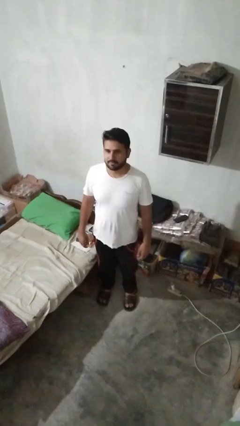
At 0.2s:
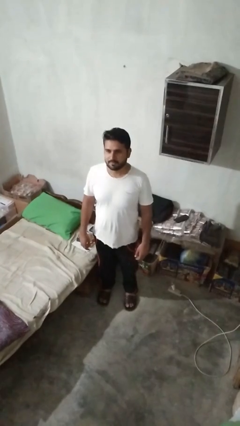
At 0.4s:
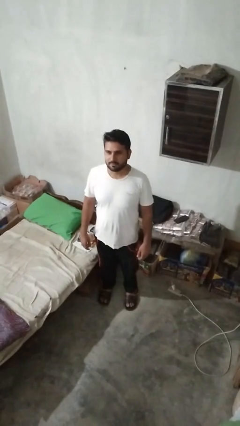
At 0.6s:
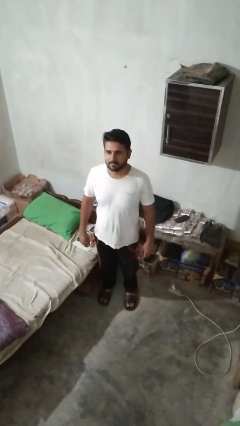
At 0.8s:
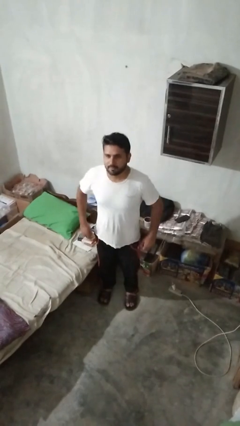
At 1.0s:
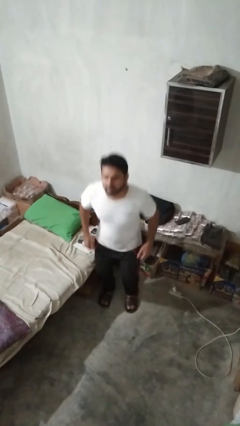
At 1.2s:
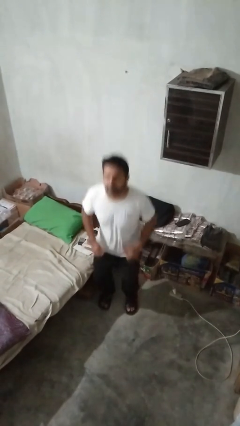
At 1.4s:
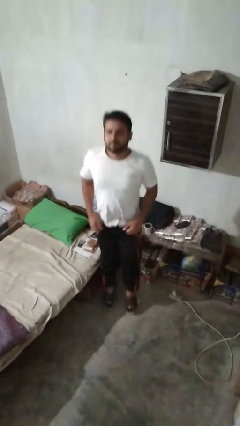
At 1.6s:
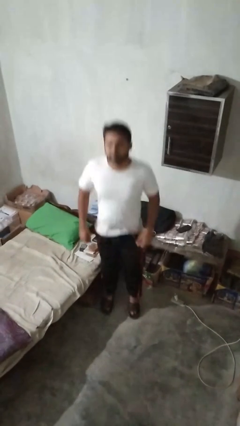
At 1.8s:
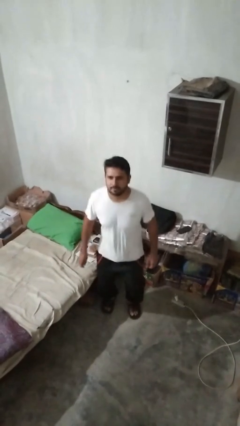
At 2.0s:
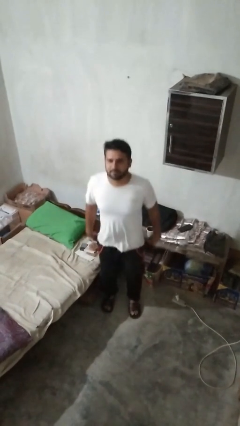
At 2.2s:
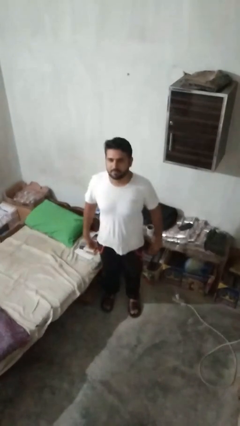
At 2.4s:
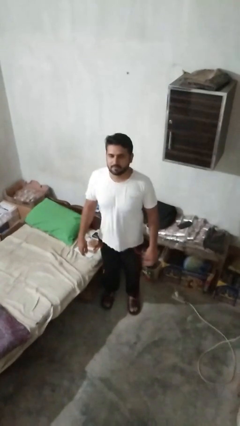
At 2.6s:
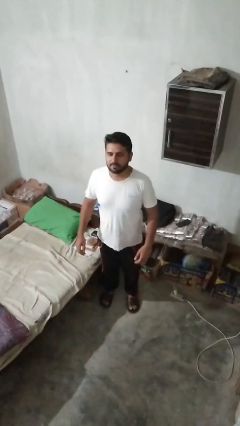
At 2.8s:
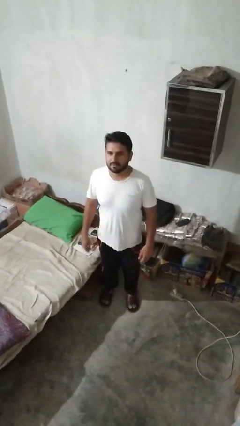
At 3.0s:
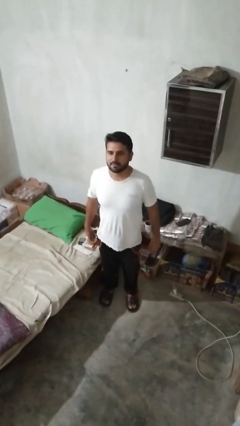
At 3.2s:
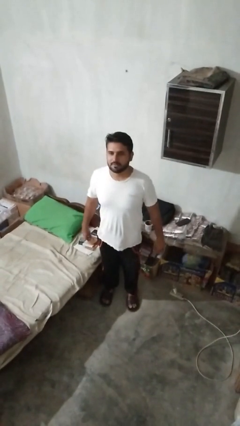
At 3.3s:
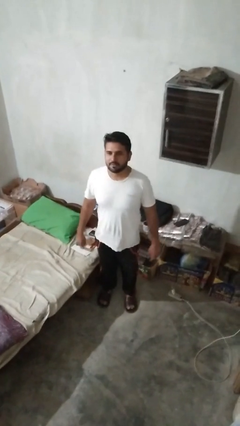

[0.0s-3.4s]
person jumps

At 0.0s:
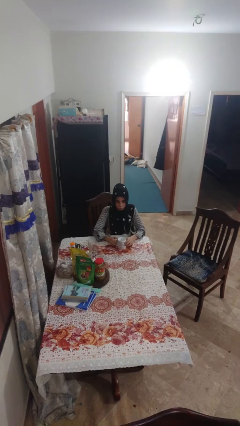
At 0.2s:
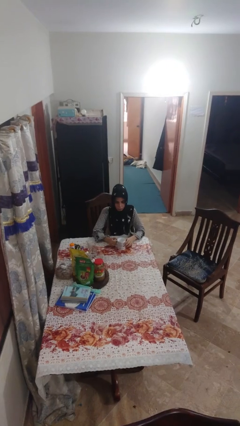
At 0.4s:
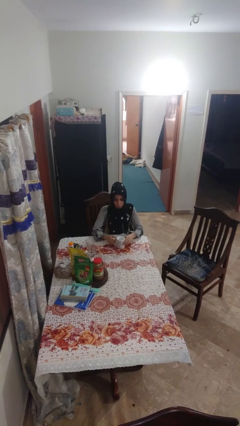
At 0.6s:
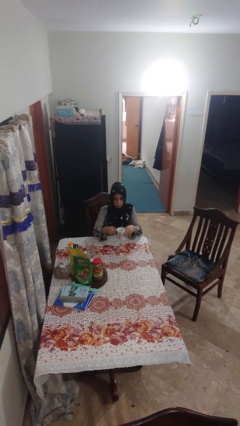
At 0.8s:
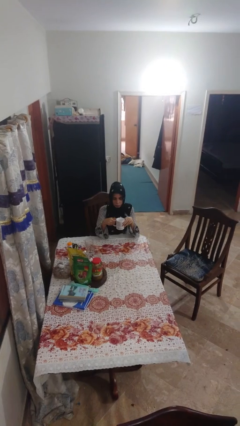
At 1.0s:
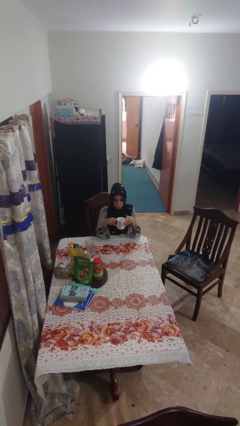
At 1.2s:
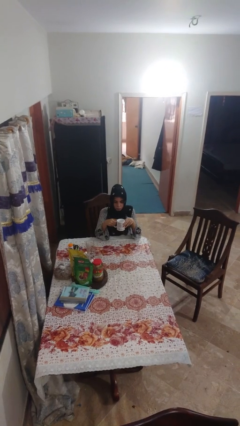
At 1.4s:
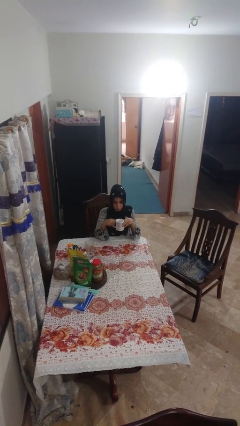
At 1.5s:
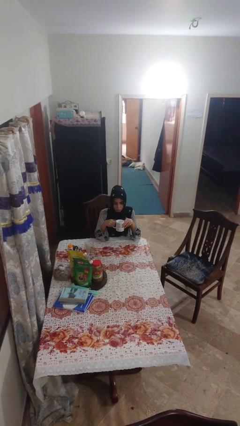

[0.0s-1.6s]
person picks up object from table

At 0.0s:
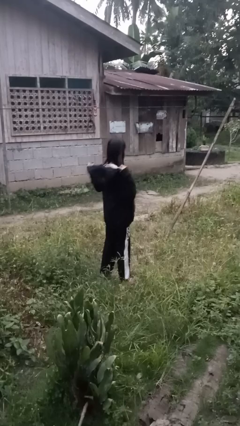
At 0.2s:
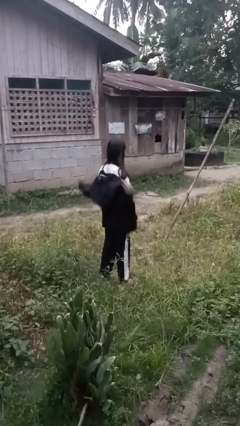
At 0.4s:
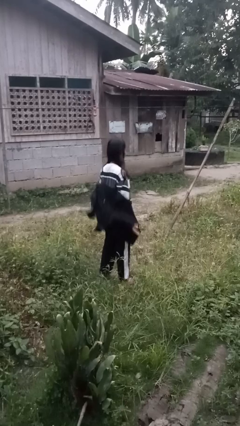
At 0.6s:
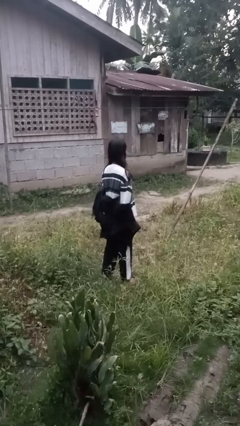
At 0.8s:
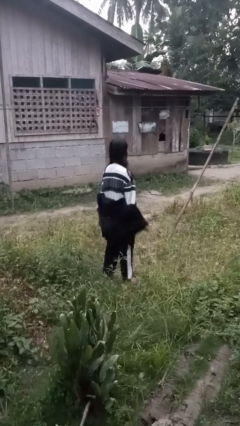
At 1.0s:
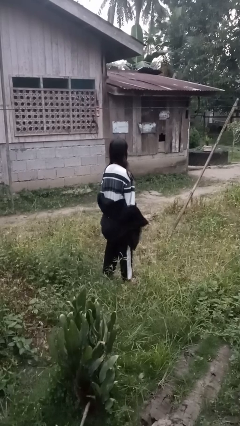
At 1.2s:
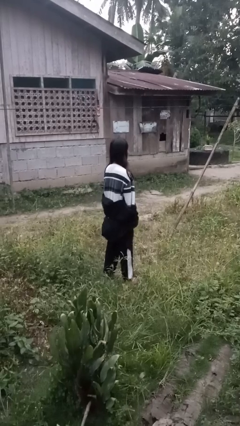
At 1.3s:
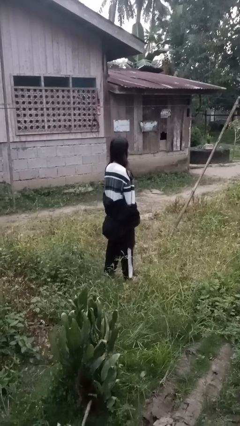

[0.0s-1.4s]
person takes off jacket

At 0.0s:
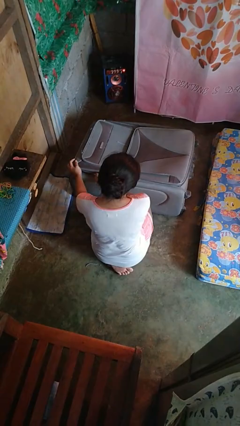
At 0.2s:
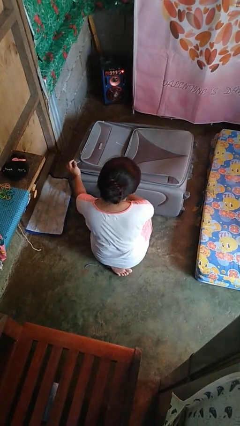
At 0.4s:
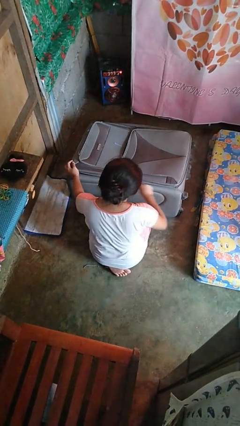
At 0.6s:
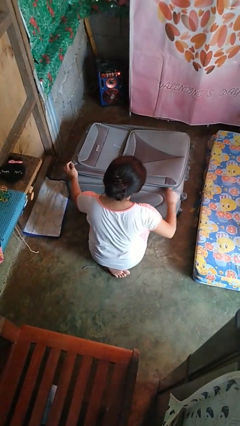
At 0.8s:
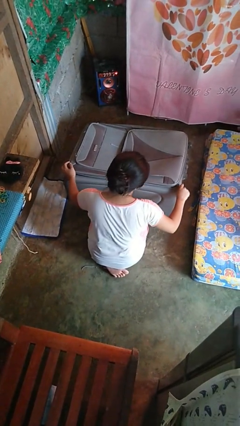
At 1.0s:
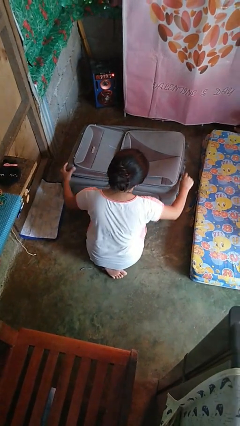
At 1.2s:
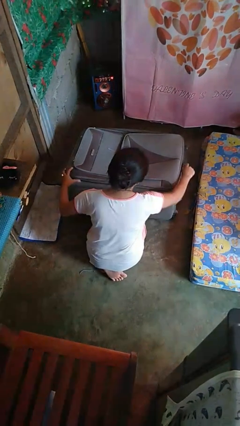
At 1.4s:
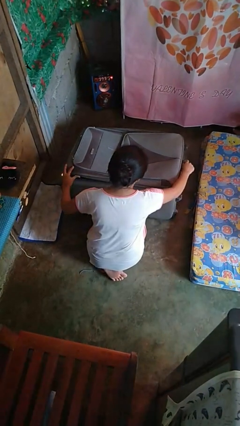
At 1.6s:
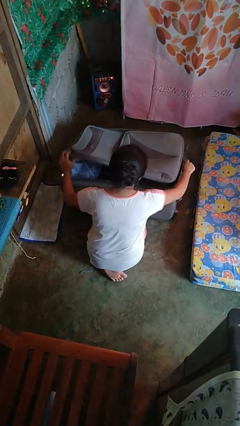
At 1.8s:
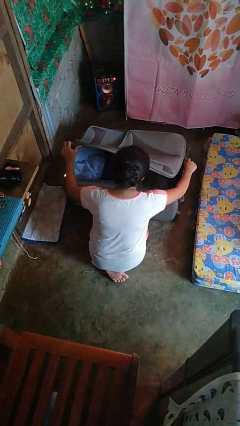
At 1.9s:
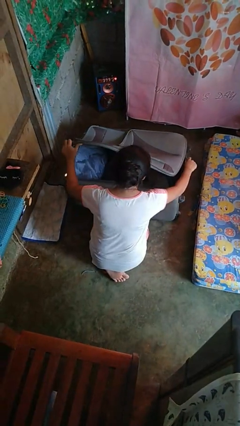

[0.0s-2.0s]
person opens suitcase

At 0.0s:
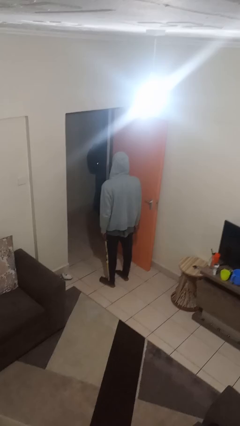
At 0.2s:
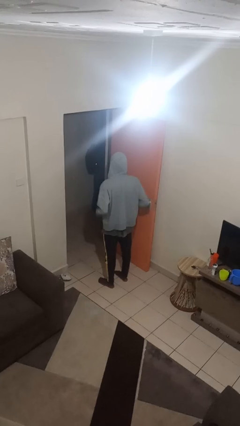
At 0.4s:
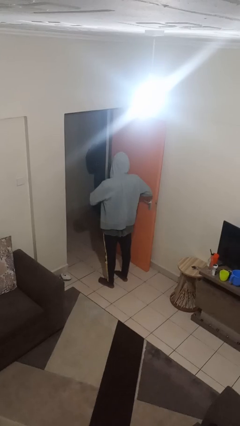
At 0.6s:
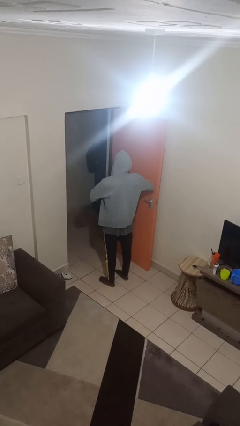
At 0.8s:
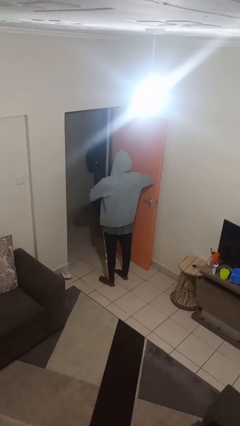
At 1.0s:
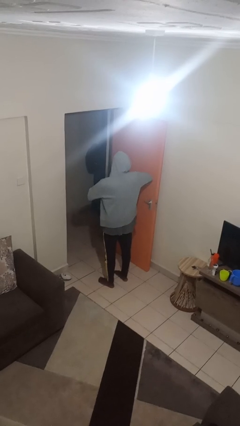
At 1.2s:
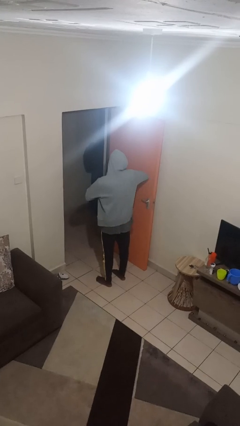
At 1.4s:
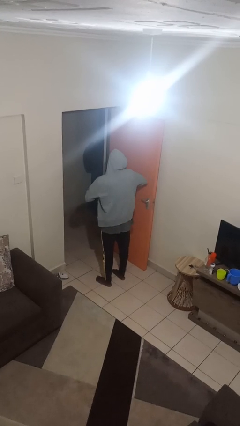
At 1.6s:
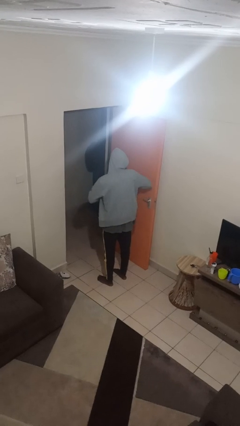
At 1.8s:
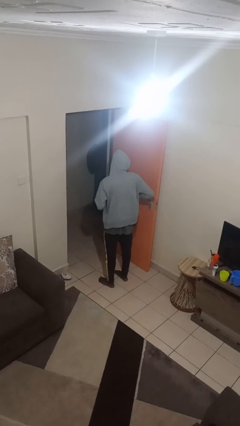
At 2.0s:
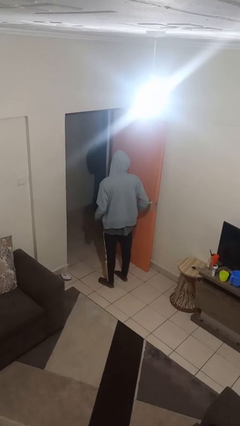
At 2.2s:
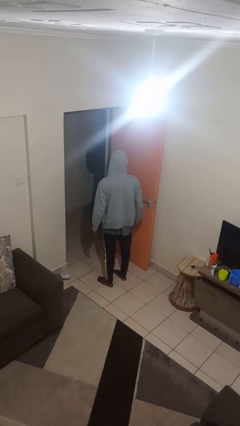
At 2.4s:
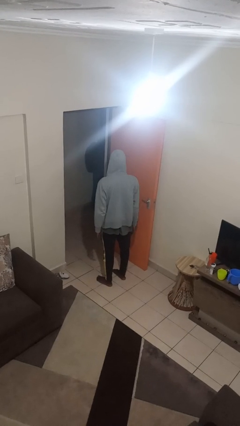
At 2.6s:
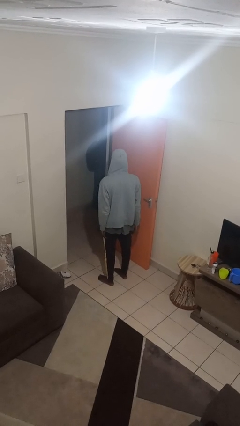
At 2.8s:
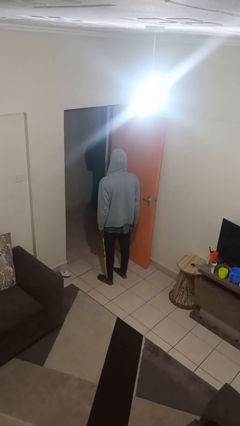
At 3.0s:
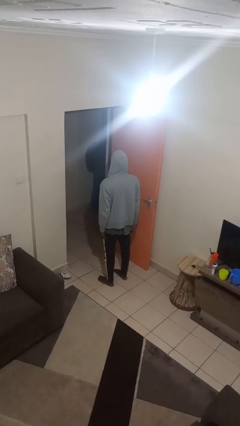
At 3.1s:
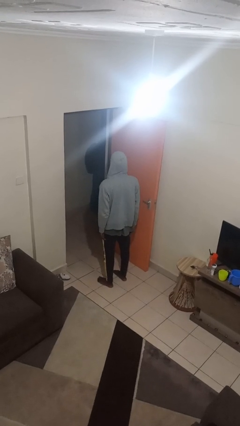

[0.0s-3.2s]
person puts on ring

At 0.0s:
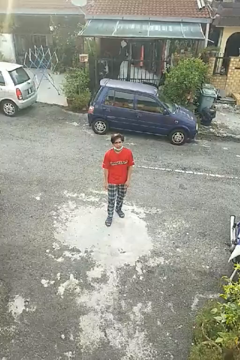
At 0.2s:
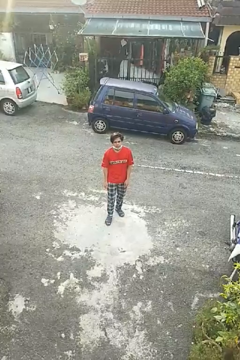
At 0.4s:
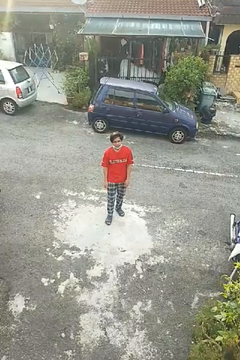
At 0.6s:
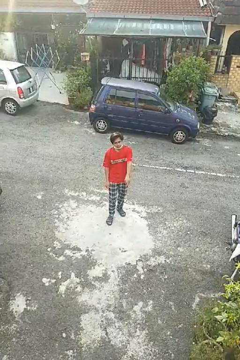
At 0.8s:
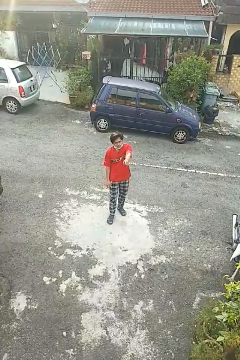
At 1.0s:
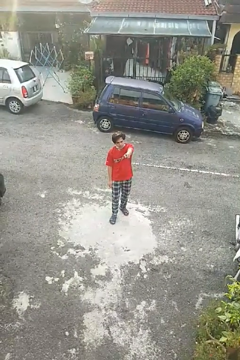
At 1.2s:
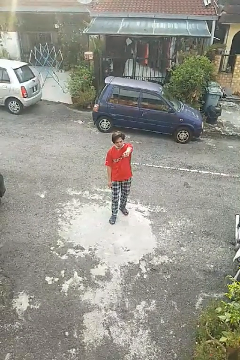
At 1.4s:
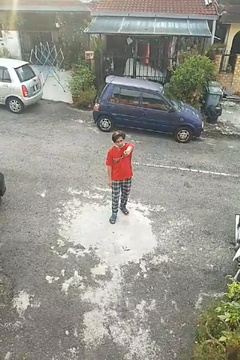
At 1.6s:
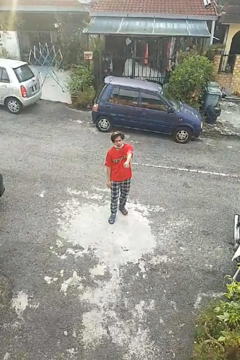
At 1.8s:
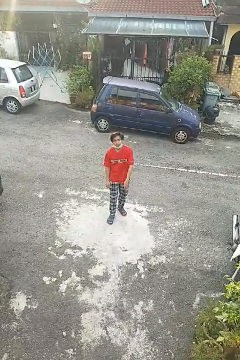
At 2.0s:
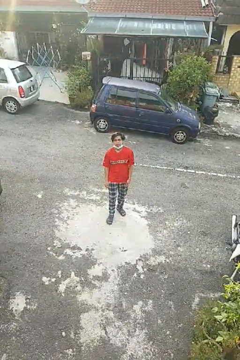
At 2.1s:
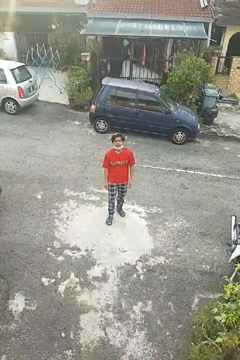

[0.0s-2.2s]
person points at person

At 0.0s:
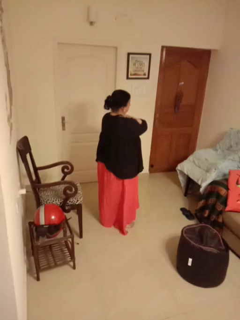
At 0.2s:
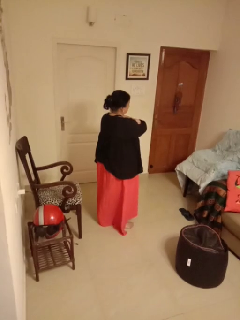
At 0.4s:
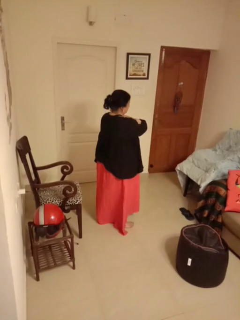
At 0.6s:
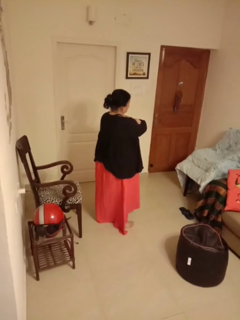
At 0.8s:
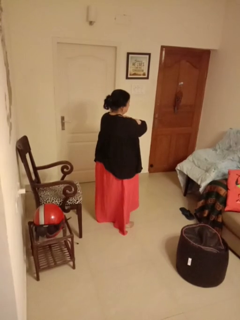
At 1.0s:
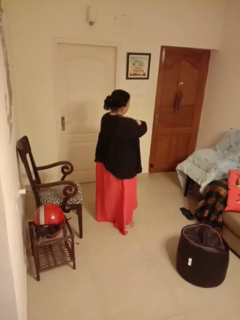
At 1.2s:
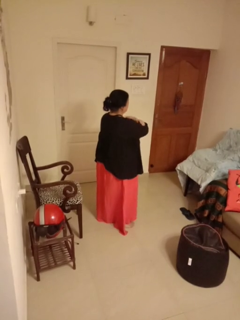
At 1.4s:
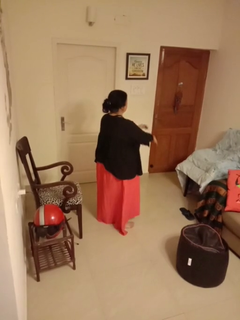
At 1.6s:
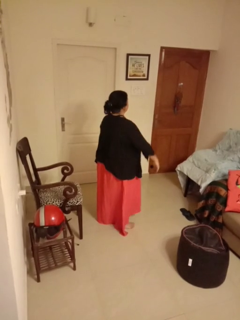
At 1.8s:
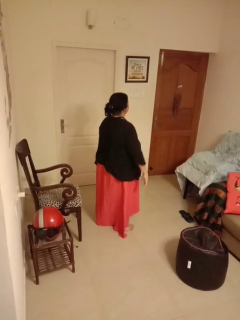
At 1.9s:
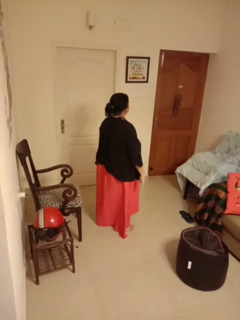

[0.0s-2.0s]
person gestures arms x

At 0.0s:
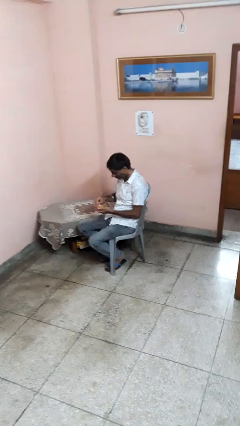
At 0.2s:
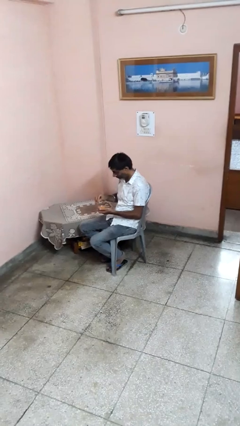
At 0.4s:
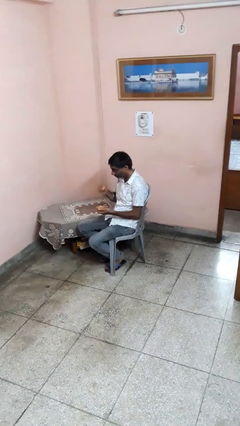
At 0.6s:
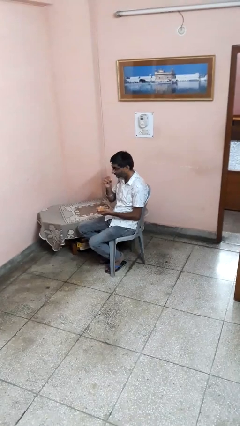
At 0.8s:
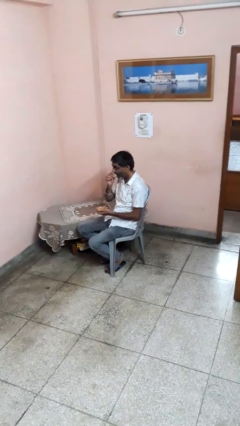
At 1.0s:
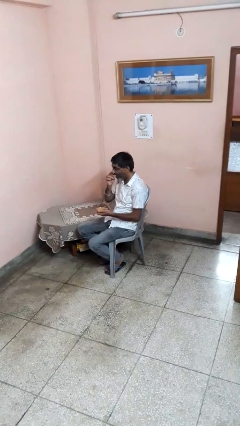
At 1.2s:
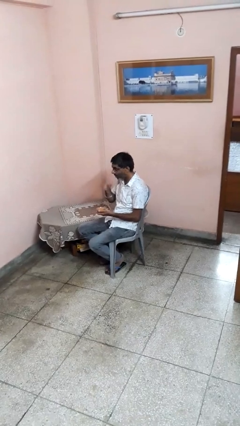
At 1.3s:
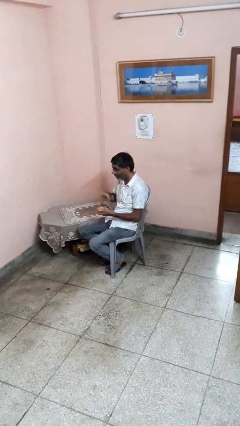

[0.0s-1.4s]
person eats with hands

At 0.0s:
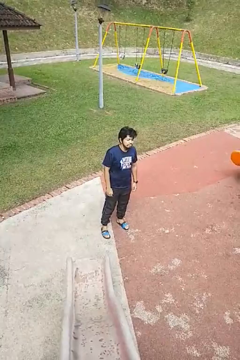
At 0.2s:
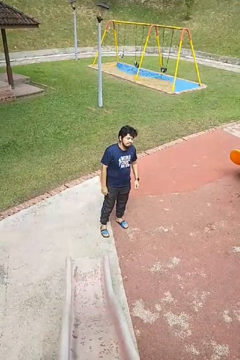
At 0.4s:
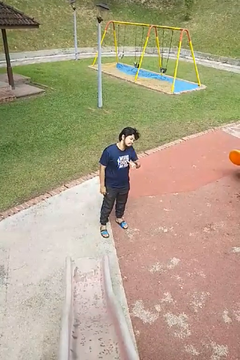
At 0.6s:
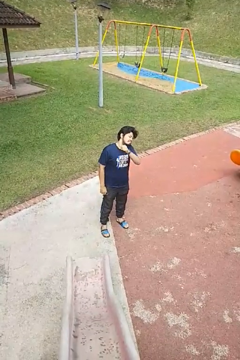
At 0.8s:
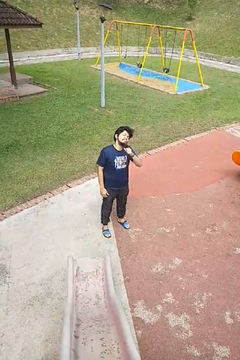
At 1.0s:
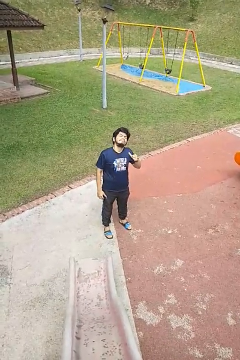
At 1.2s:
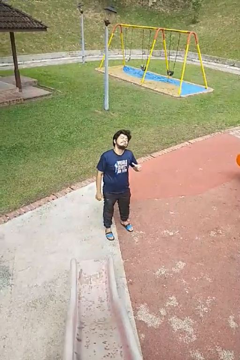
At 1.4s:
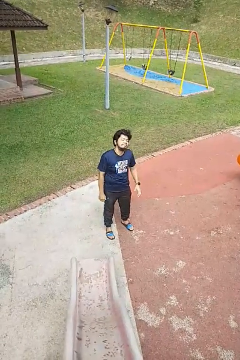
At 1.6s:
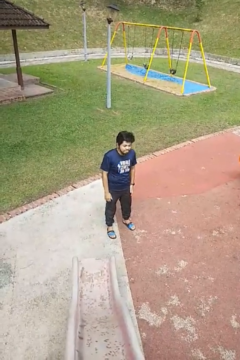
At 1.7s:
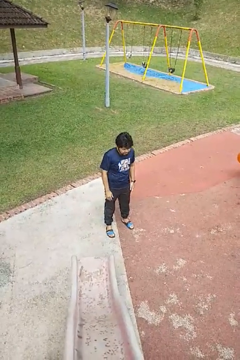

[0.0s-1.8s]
person gestures cut
